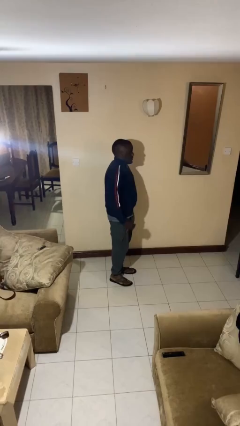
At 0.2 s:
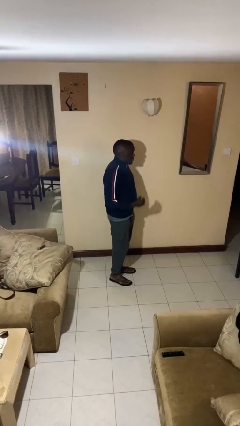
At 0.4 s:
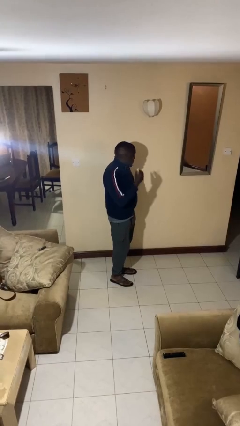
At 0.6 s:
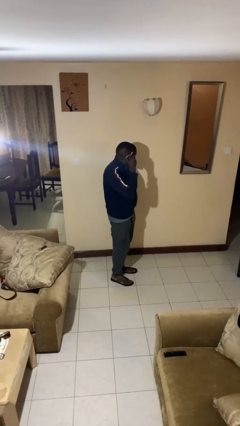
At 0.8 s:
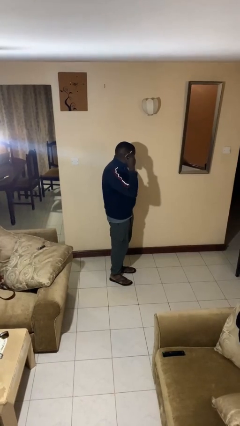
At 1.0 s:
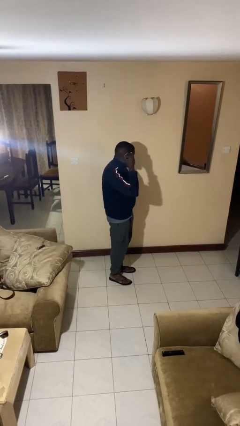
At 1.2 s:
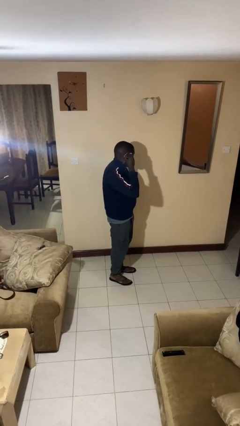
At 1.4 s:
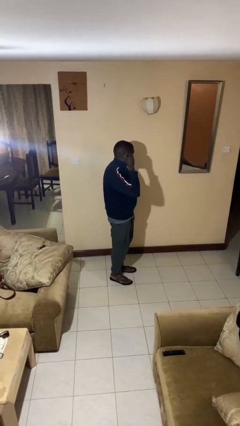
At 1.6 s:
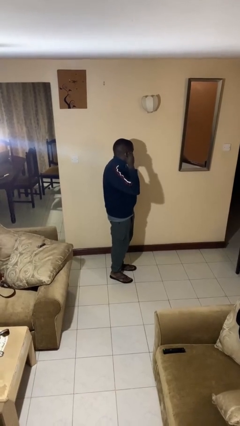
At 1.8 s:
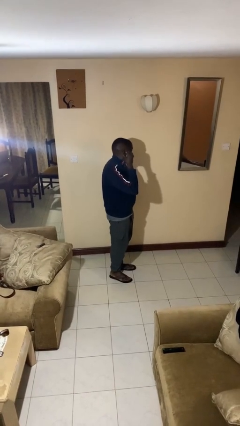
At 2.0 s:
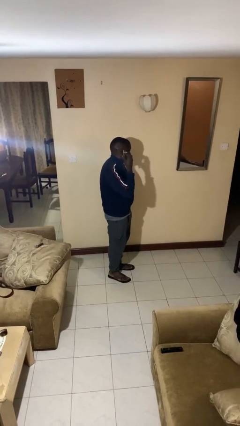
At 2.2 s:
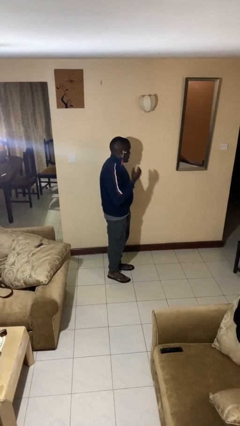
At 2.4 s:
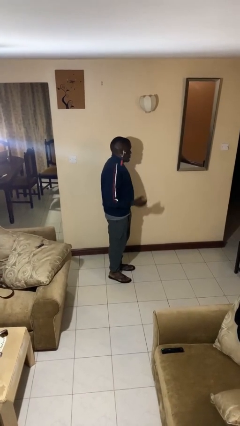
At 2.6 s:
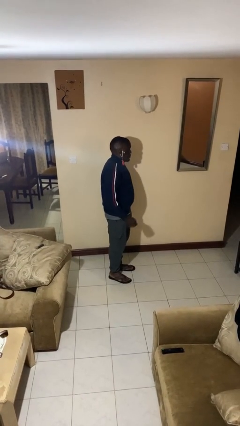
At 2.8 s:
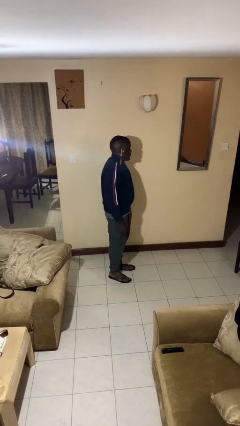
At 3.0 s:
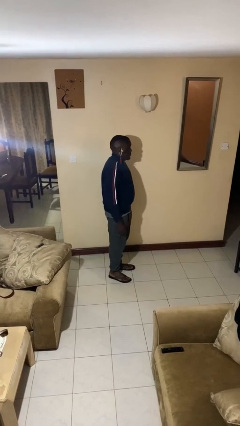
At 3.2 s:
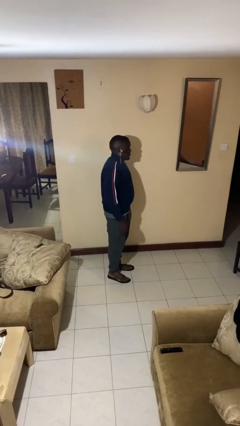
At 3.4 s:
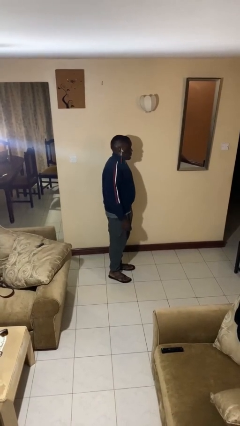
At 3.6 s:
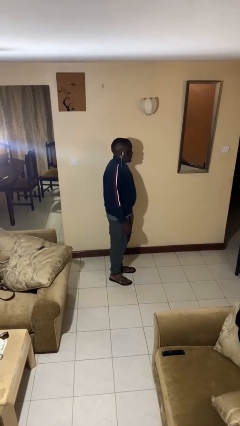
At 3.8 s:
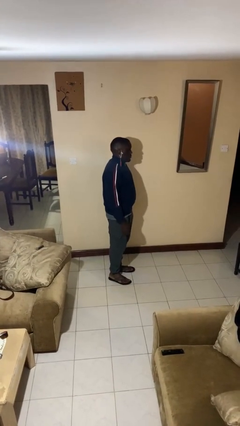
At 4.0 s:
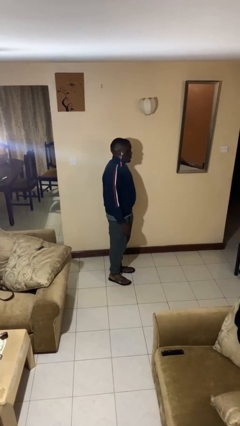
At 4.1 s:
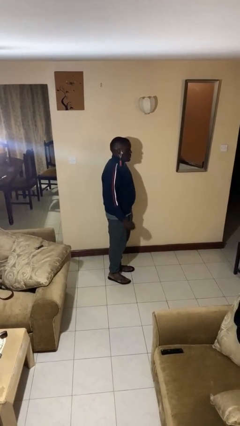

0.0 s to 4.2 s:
person puts on earrings

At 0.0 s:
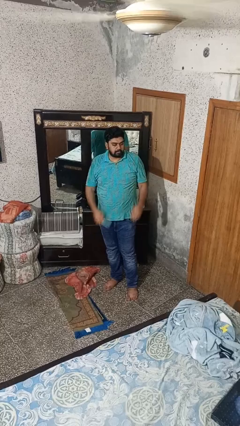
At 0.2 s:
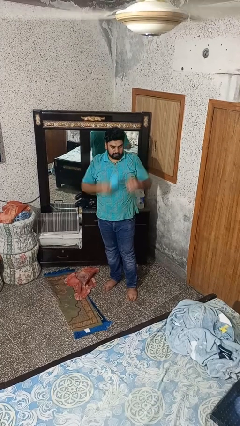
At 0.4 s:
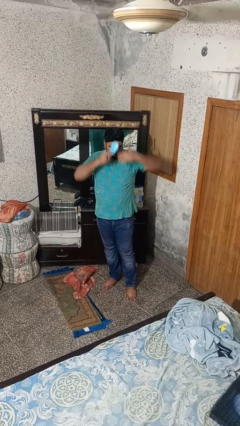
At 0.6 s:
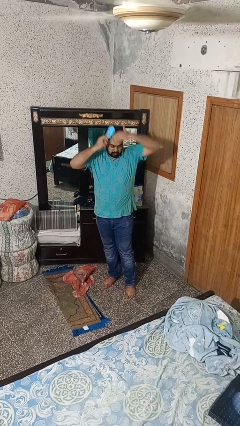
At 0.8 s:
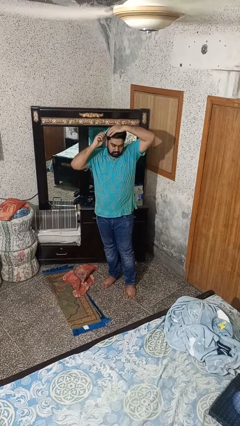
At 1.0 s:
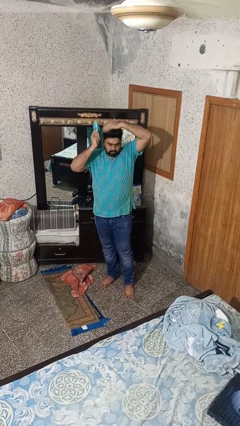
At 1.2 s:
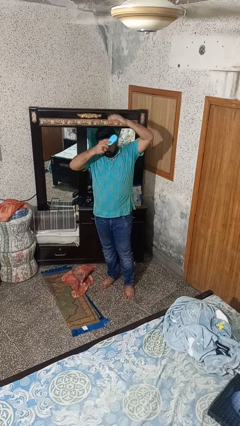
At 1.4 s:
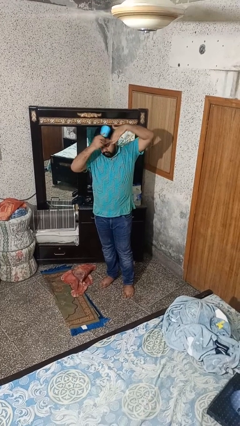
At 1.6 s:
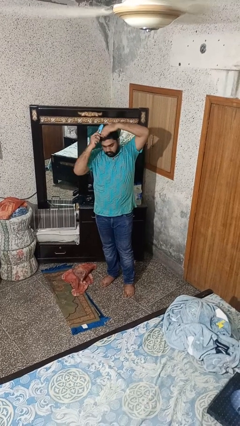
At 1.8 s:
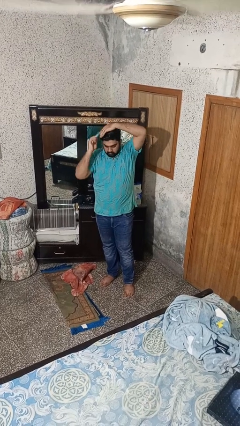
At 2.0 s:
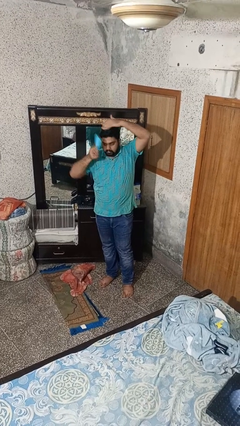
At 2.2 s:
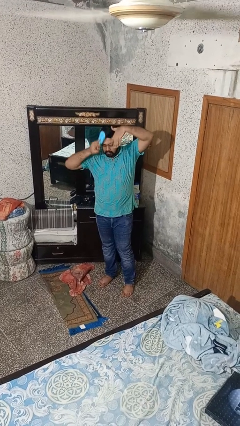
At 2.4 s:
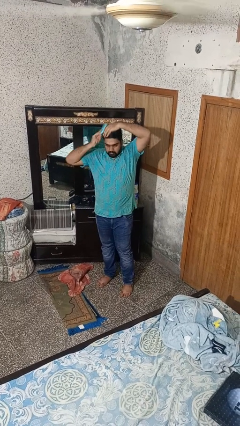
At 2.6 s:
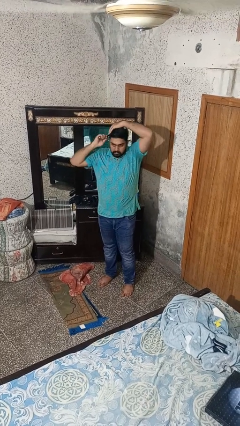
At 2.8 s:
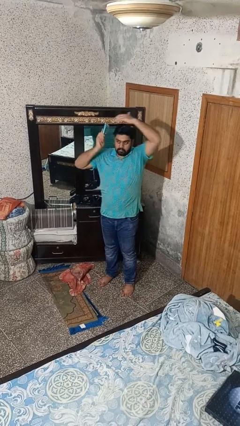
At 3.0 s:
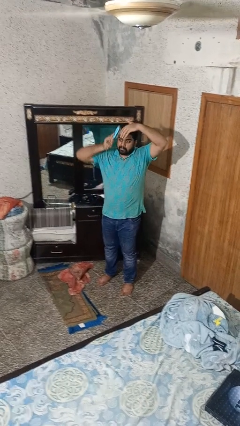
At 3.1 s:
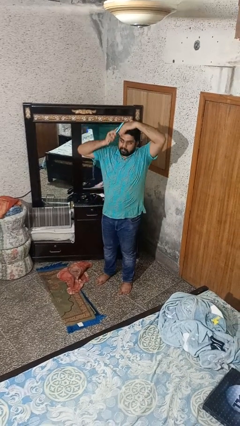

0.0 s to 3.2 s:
person brushes hair

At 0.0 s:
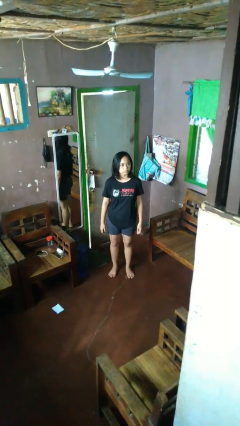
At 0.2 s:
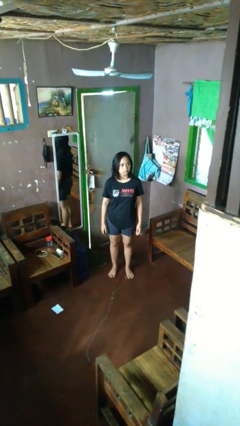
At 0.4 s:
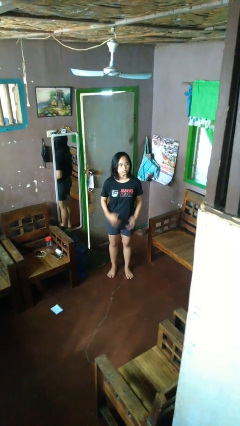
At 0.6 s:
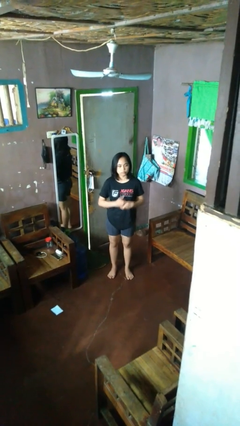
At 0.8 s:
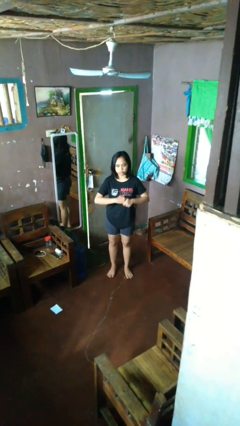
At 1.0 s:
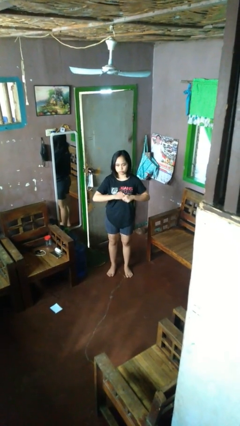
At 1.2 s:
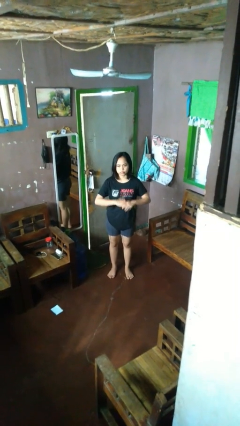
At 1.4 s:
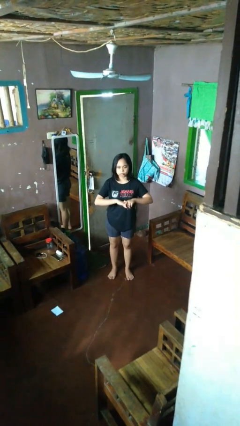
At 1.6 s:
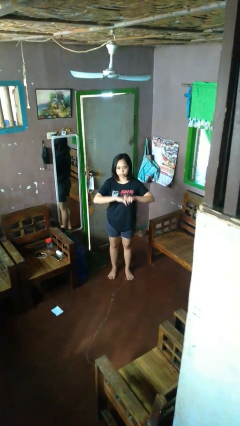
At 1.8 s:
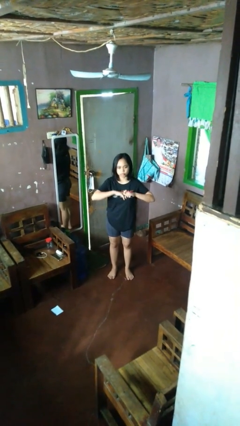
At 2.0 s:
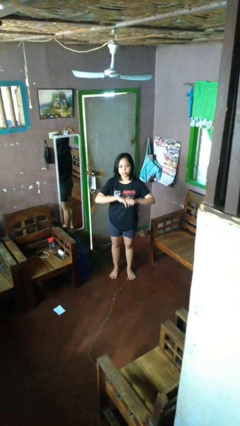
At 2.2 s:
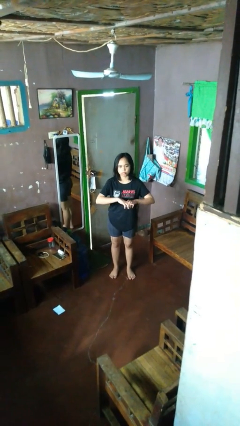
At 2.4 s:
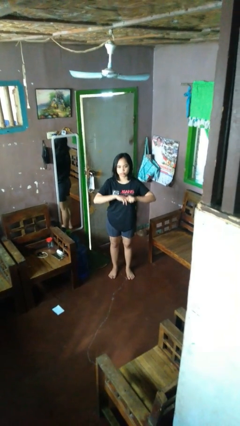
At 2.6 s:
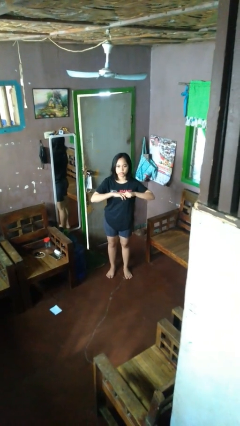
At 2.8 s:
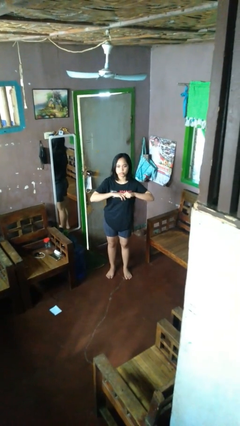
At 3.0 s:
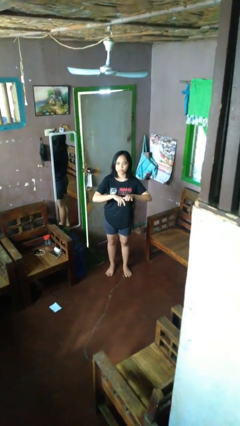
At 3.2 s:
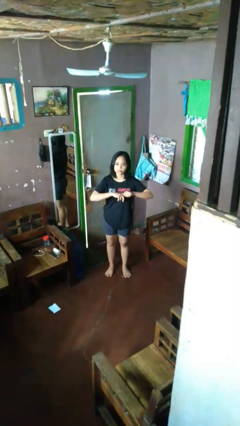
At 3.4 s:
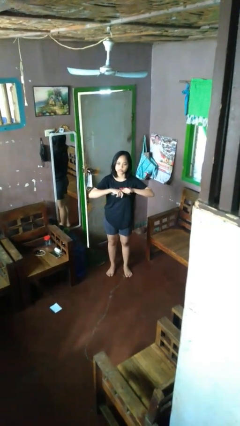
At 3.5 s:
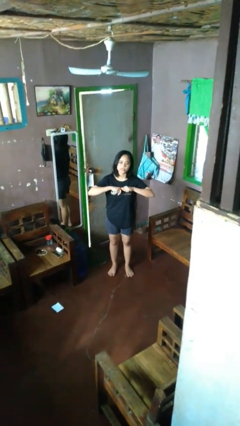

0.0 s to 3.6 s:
person cracks knuckles

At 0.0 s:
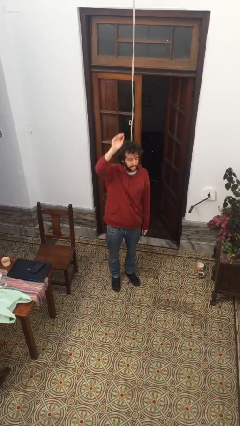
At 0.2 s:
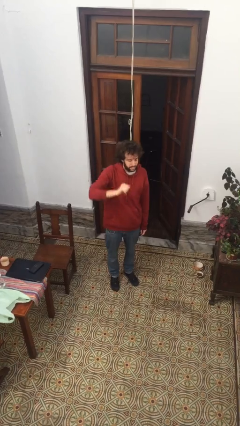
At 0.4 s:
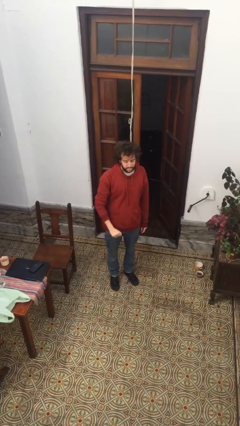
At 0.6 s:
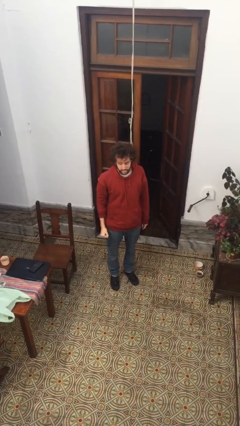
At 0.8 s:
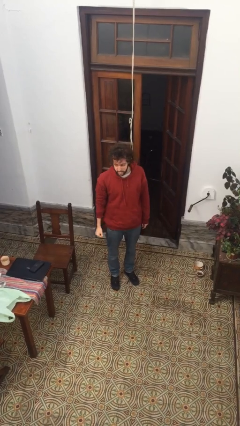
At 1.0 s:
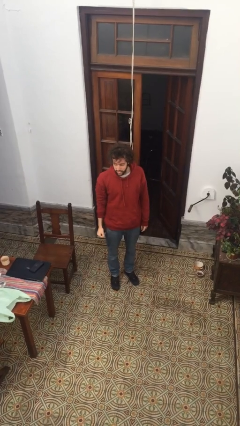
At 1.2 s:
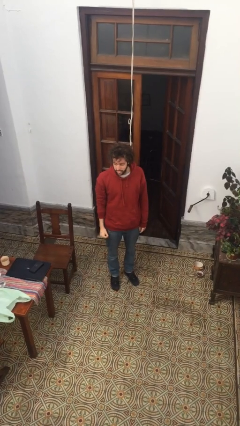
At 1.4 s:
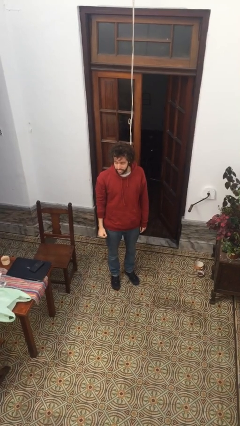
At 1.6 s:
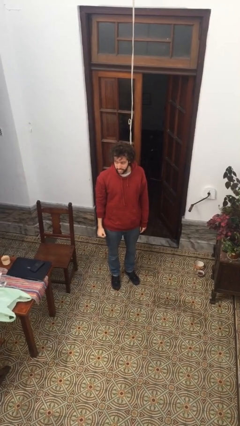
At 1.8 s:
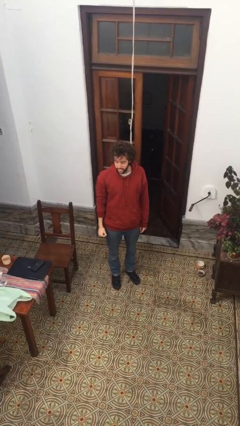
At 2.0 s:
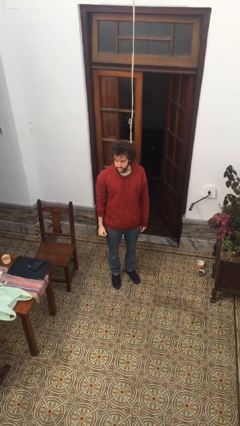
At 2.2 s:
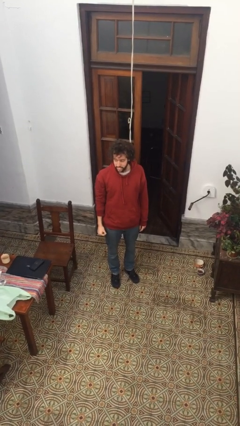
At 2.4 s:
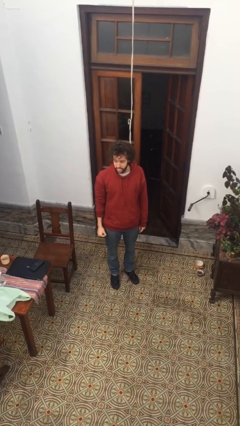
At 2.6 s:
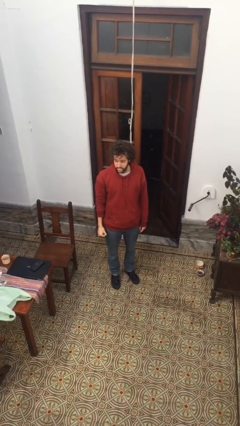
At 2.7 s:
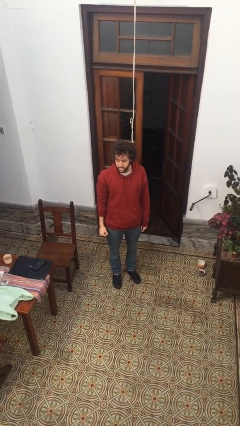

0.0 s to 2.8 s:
person gestures lower hand

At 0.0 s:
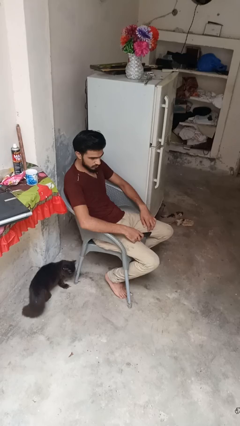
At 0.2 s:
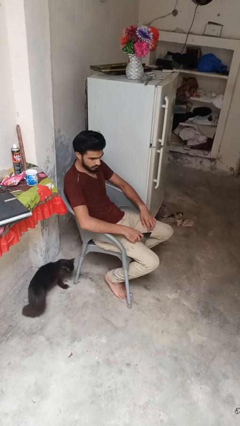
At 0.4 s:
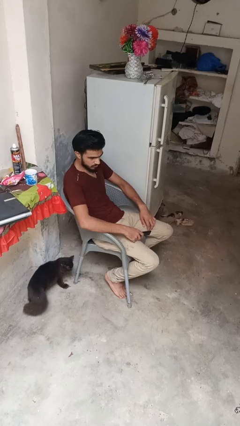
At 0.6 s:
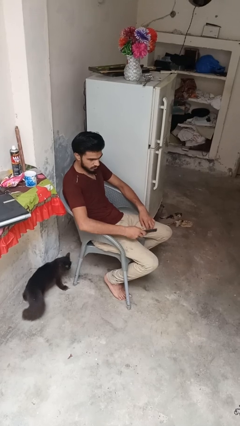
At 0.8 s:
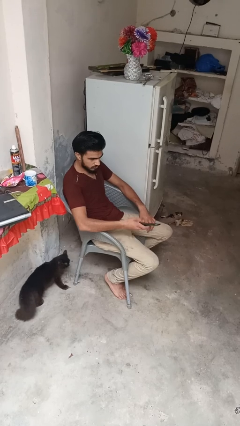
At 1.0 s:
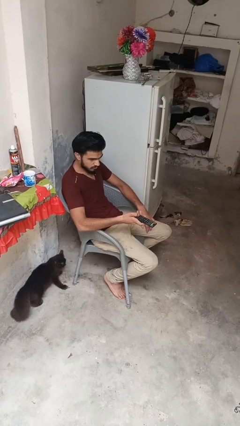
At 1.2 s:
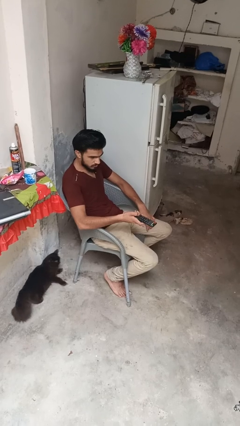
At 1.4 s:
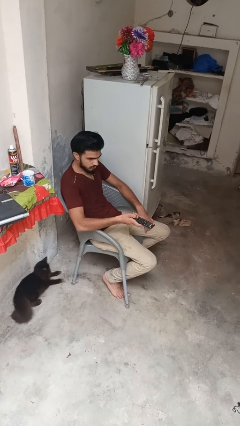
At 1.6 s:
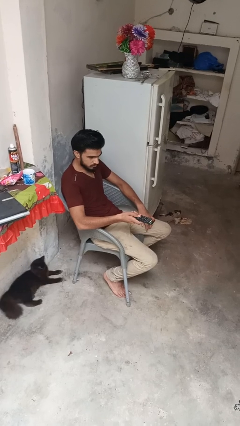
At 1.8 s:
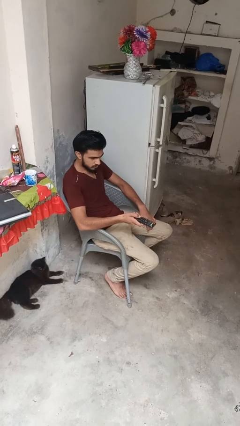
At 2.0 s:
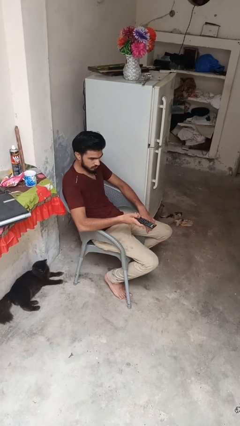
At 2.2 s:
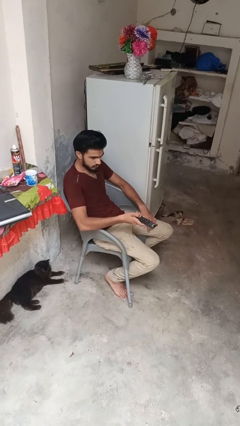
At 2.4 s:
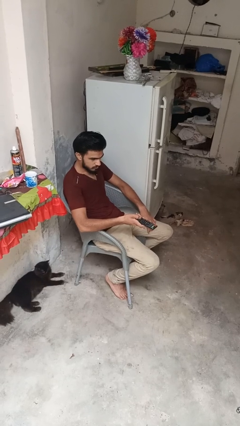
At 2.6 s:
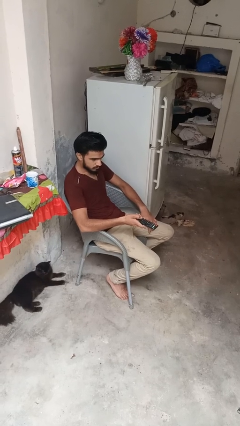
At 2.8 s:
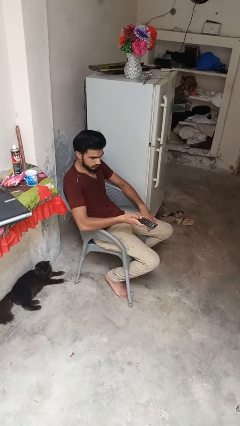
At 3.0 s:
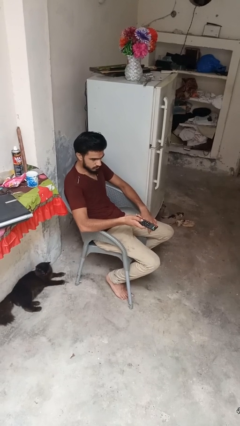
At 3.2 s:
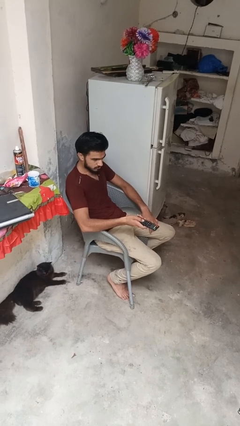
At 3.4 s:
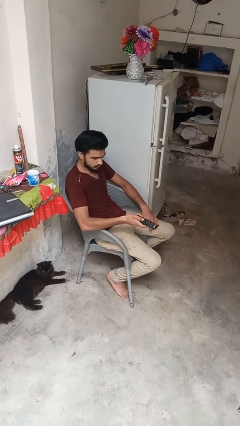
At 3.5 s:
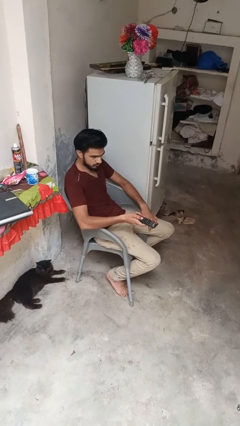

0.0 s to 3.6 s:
person uses television remote

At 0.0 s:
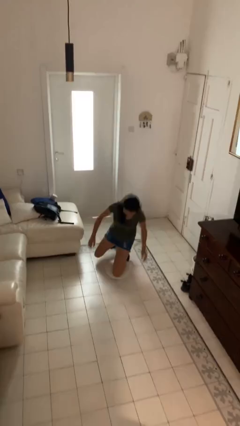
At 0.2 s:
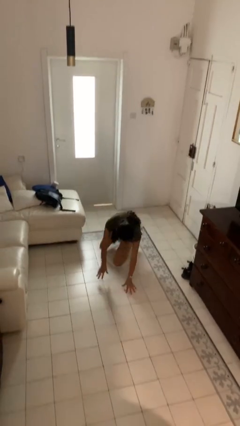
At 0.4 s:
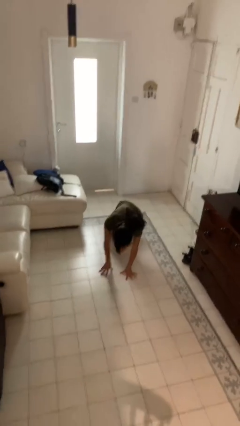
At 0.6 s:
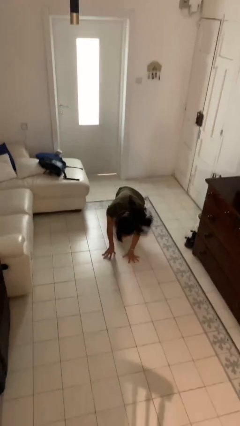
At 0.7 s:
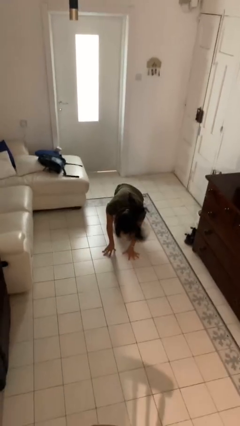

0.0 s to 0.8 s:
person trips on object on floor
